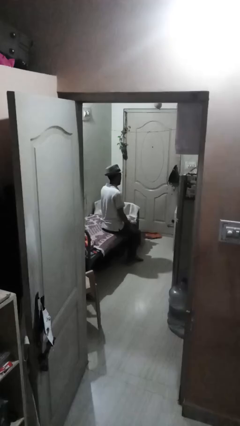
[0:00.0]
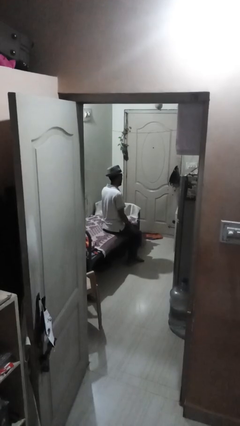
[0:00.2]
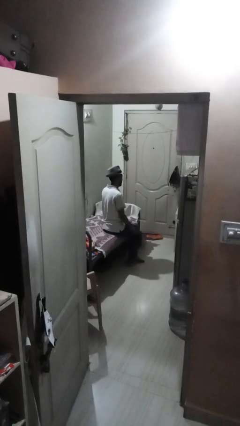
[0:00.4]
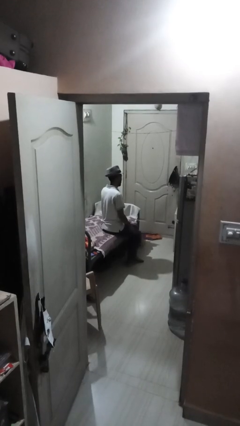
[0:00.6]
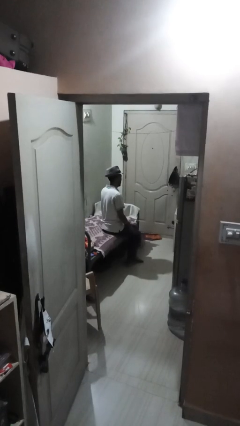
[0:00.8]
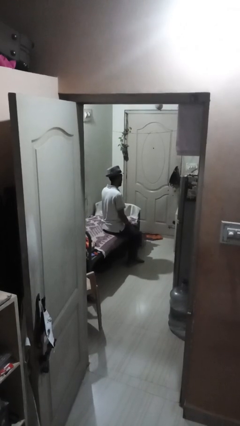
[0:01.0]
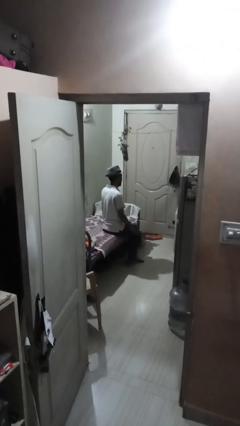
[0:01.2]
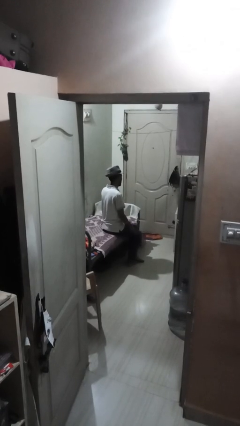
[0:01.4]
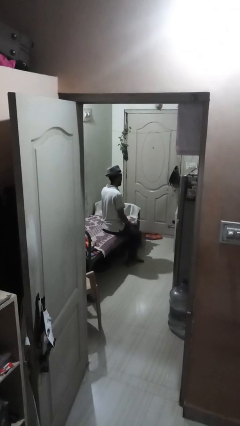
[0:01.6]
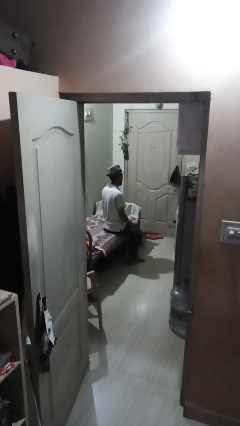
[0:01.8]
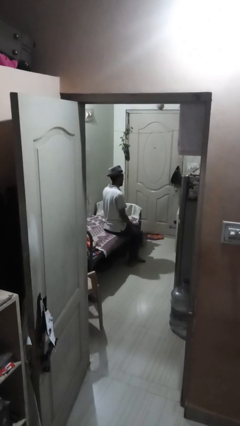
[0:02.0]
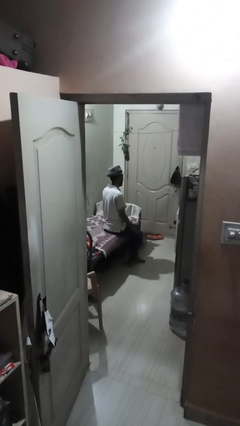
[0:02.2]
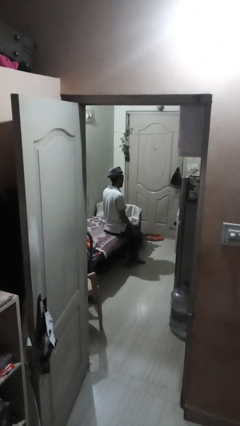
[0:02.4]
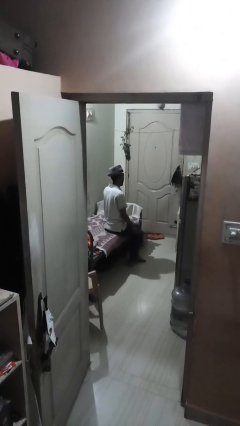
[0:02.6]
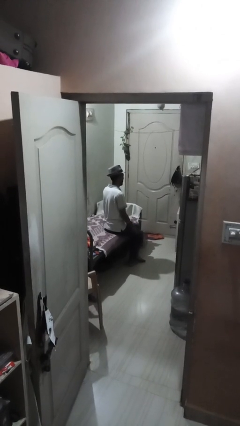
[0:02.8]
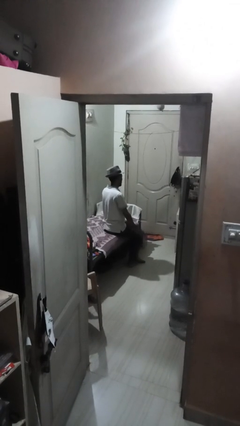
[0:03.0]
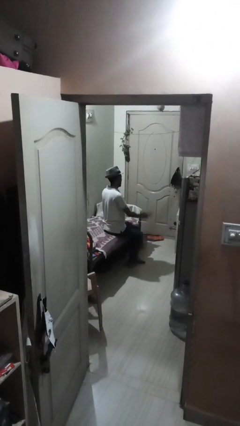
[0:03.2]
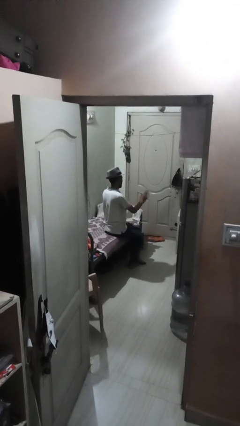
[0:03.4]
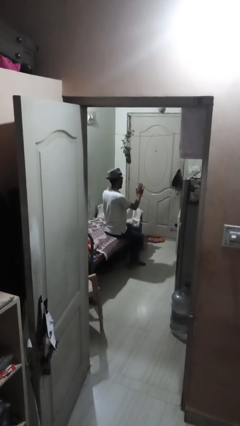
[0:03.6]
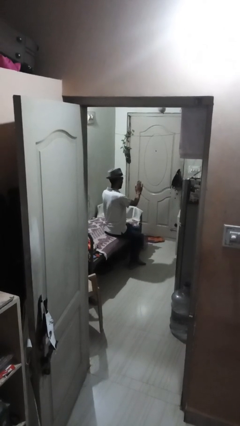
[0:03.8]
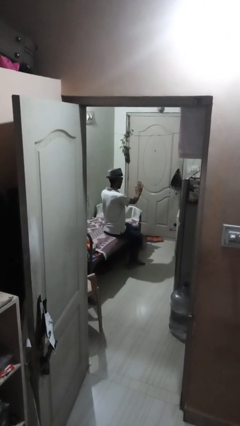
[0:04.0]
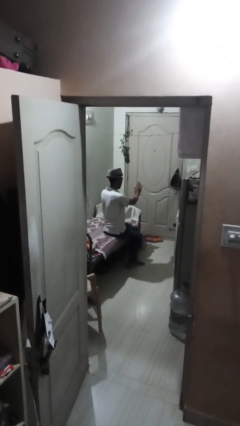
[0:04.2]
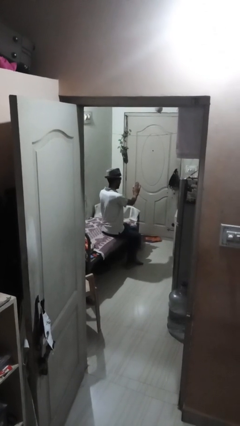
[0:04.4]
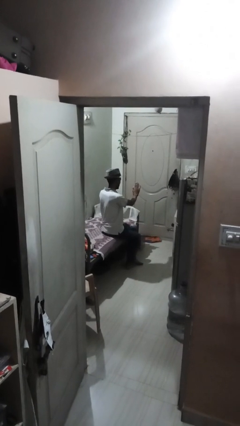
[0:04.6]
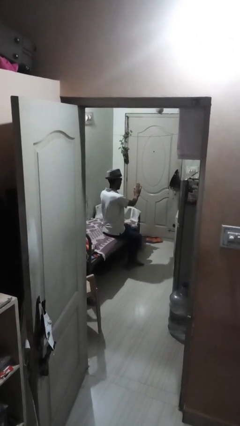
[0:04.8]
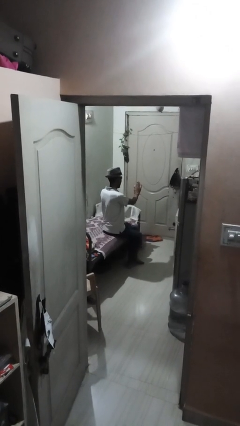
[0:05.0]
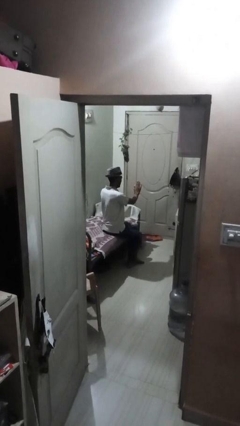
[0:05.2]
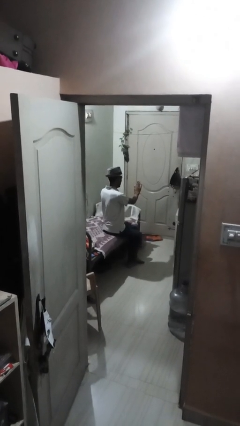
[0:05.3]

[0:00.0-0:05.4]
person gestures stop

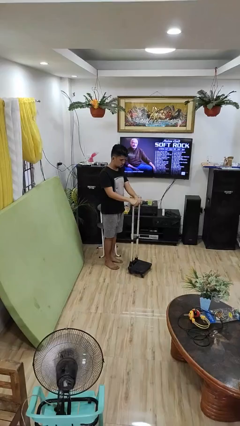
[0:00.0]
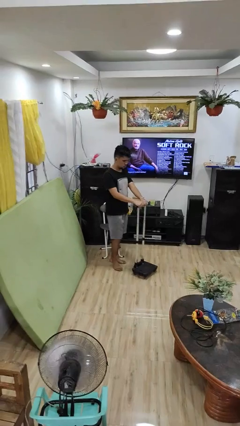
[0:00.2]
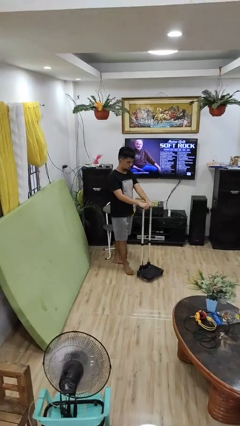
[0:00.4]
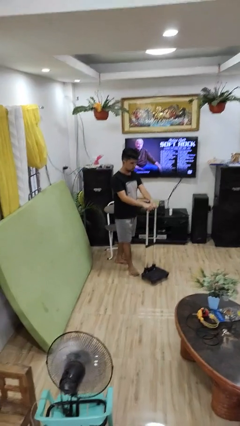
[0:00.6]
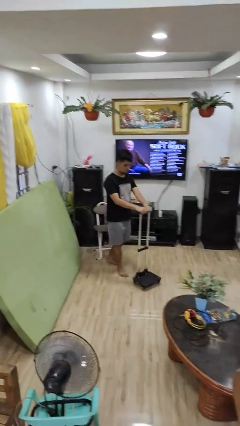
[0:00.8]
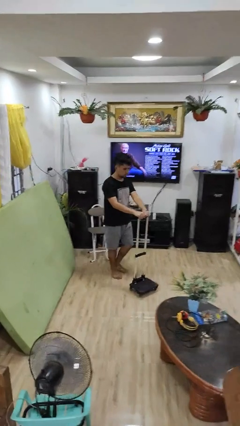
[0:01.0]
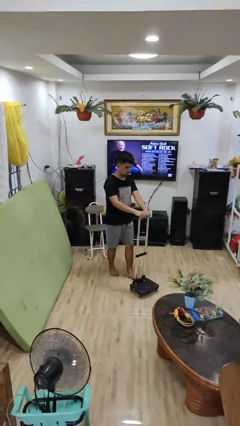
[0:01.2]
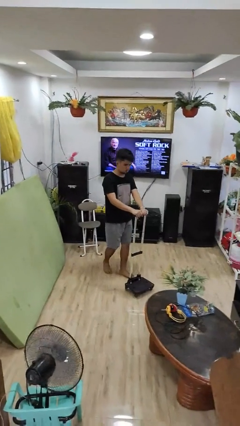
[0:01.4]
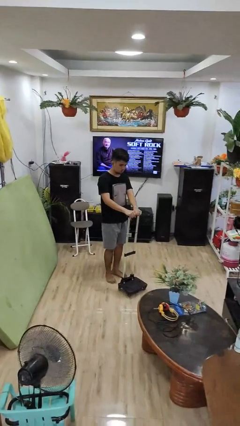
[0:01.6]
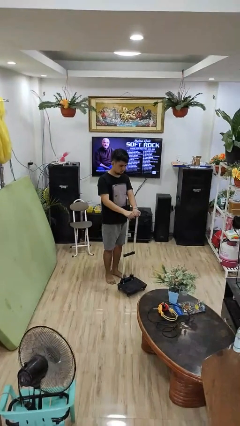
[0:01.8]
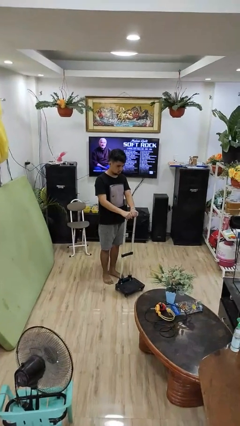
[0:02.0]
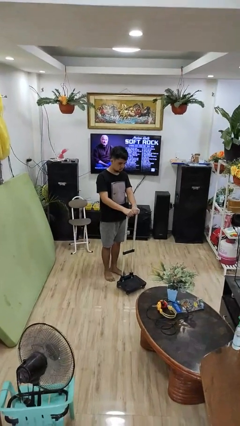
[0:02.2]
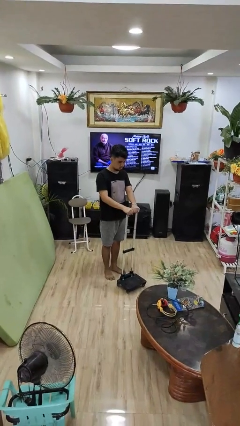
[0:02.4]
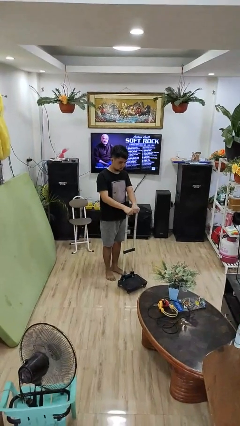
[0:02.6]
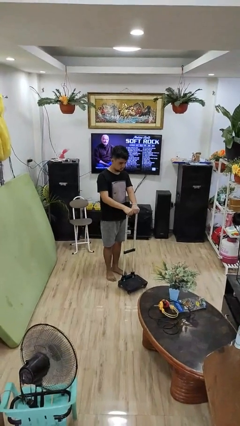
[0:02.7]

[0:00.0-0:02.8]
person pushes wheeled cart

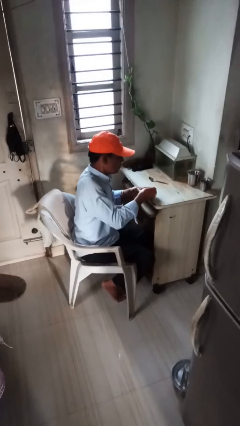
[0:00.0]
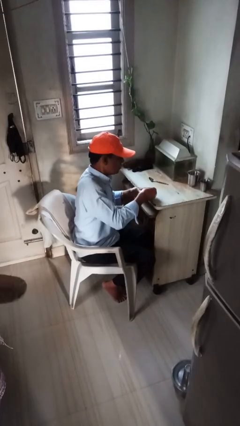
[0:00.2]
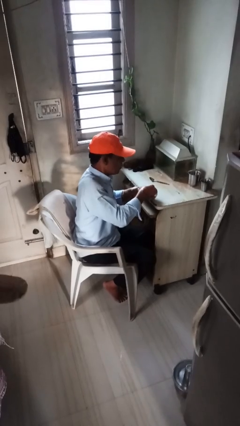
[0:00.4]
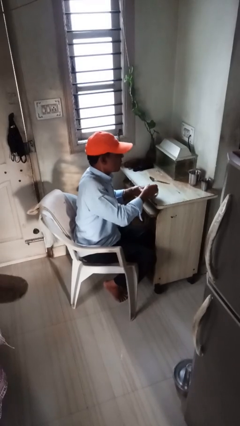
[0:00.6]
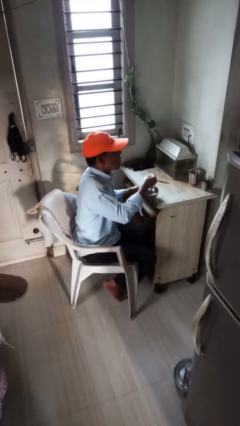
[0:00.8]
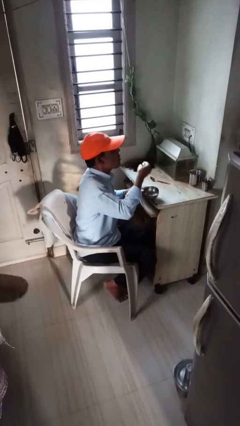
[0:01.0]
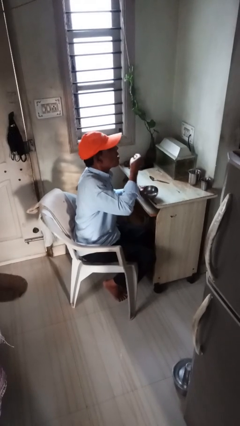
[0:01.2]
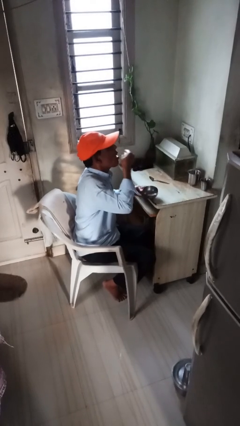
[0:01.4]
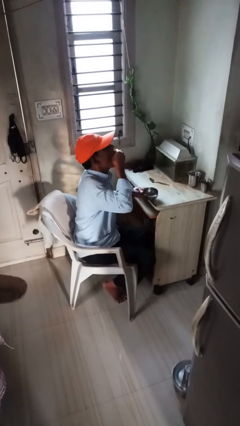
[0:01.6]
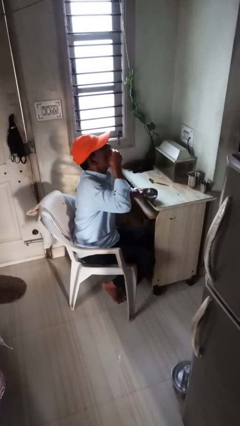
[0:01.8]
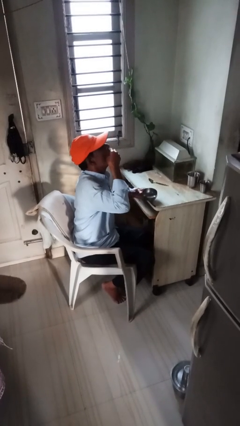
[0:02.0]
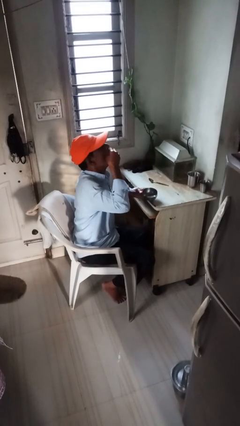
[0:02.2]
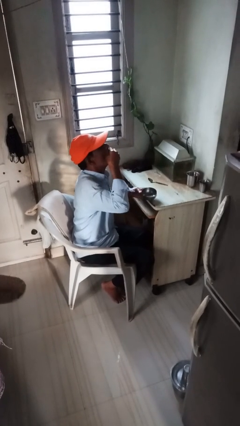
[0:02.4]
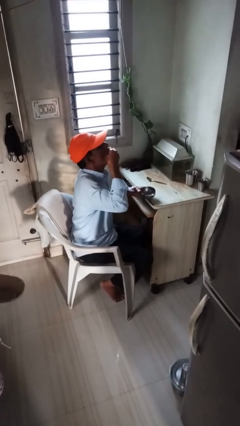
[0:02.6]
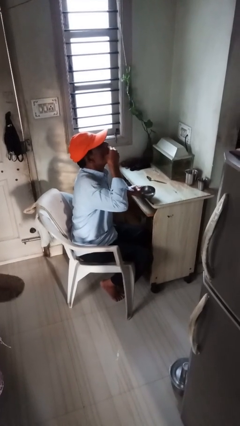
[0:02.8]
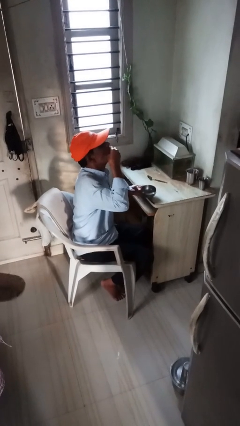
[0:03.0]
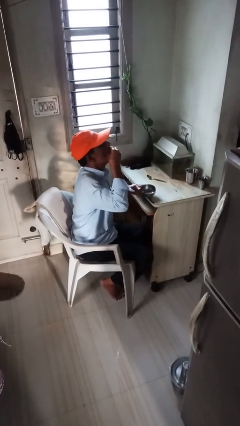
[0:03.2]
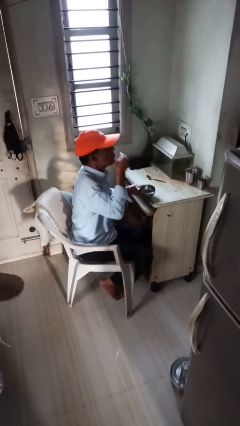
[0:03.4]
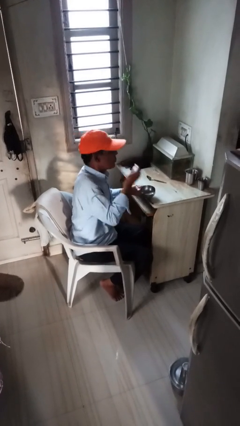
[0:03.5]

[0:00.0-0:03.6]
person eats with hands

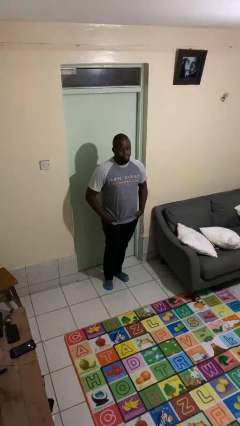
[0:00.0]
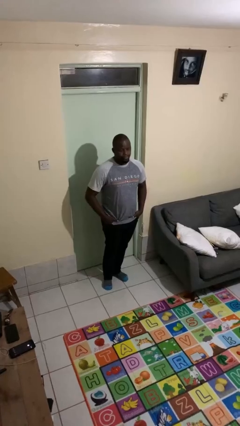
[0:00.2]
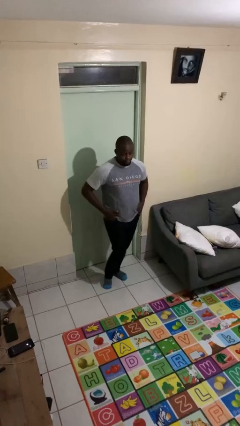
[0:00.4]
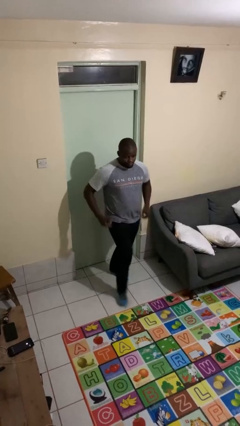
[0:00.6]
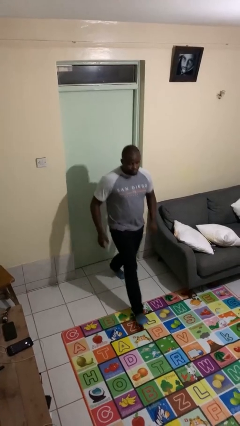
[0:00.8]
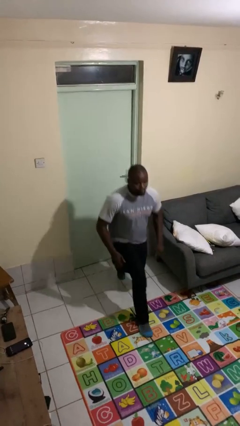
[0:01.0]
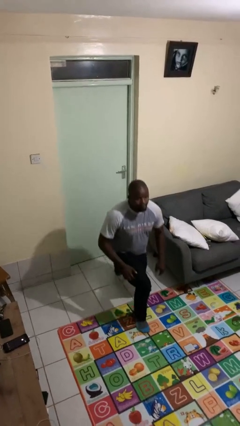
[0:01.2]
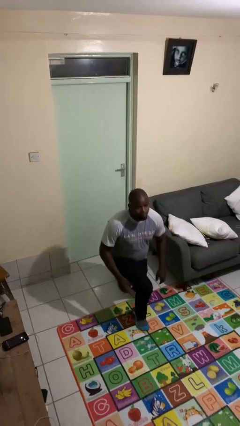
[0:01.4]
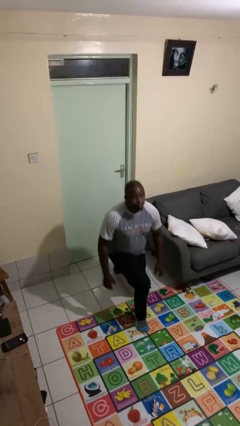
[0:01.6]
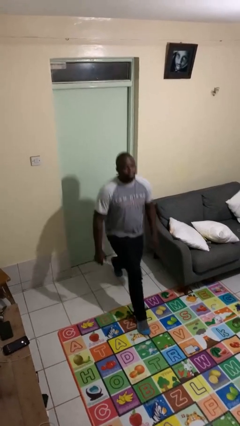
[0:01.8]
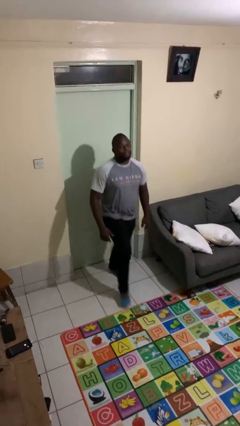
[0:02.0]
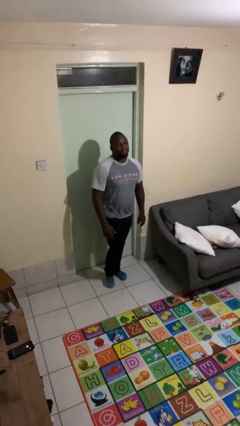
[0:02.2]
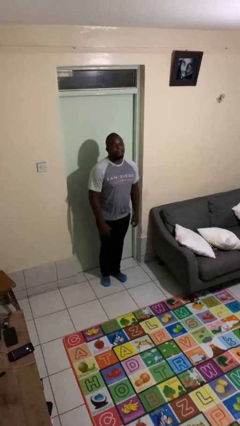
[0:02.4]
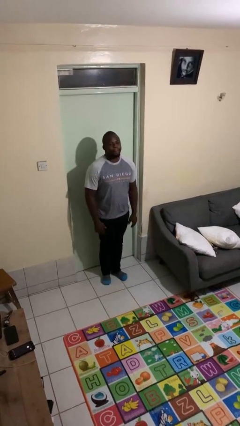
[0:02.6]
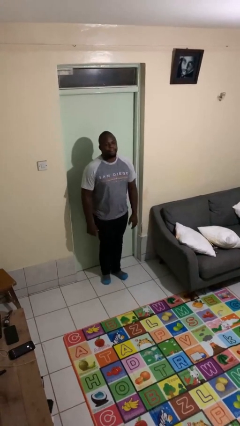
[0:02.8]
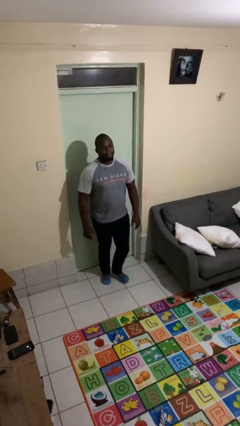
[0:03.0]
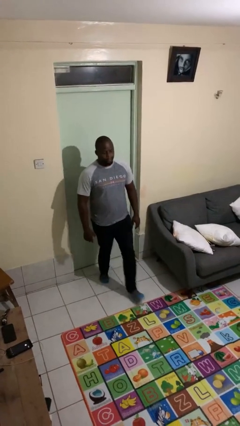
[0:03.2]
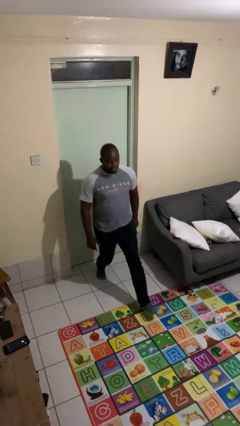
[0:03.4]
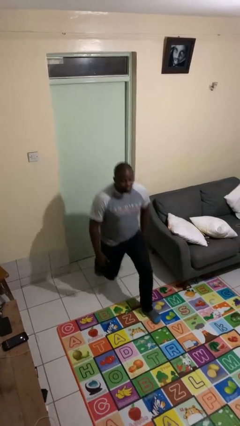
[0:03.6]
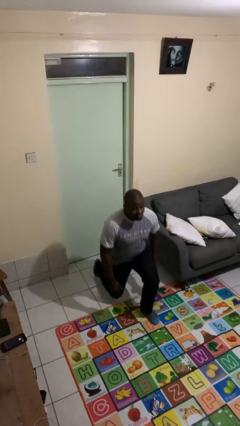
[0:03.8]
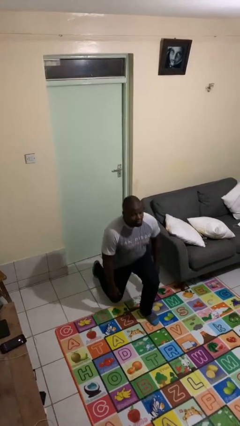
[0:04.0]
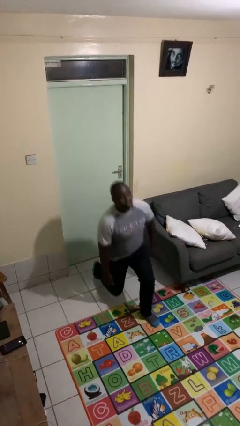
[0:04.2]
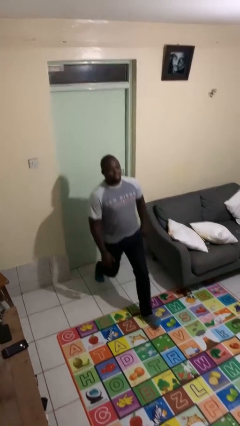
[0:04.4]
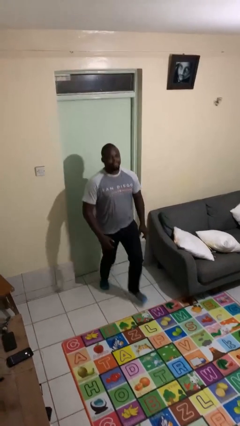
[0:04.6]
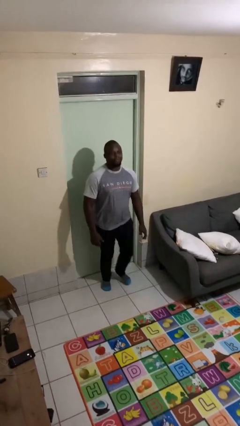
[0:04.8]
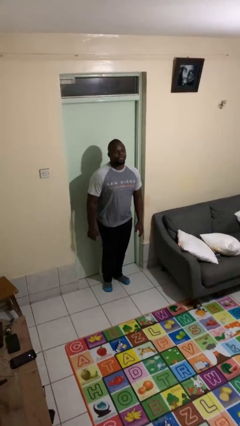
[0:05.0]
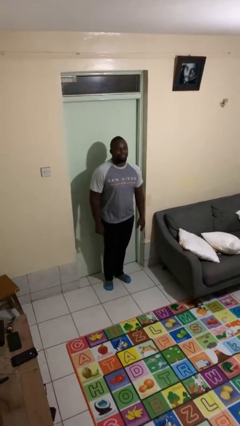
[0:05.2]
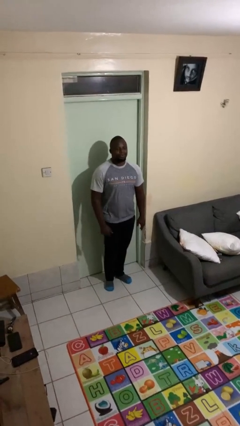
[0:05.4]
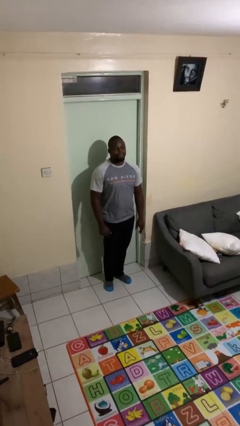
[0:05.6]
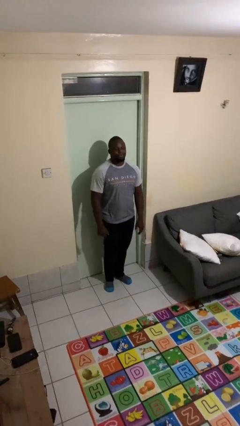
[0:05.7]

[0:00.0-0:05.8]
person exercises with lunges

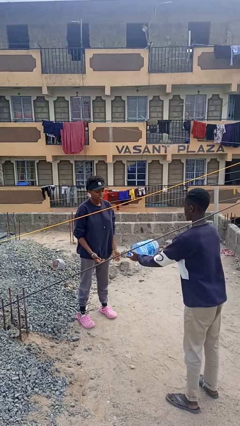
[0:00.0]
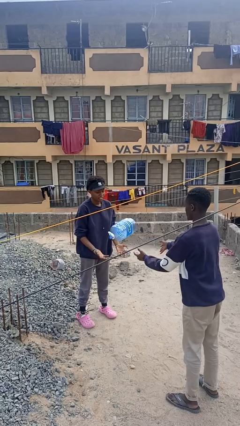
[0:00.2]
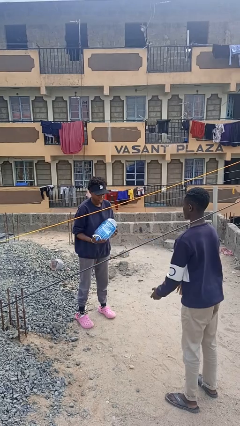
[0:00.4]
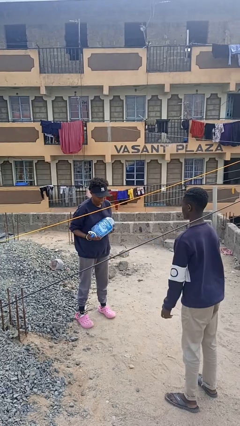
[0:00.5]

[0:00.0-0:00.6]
person throws object to person
